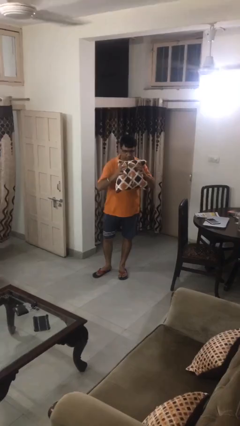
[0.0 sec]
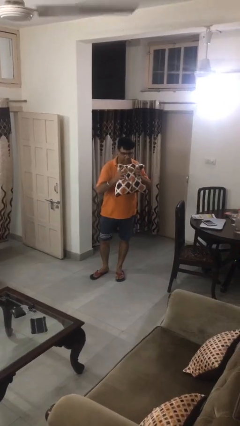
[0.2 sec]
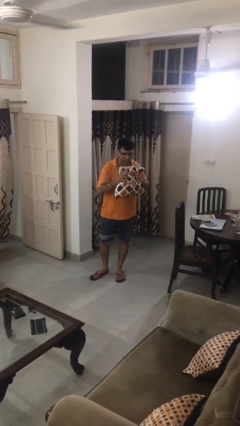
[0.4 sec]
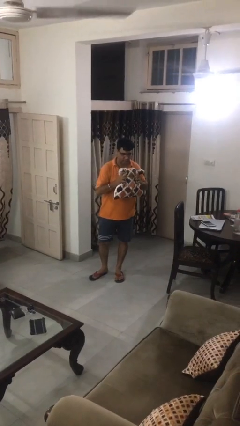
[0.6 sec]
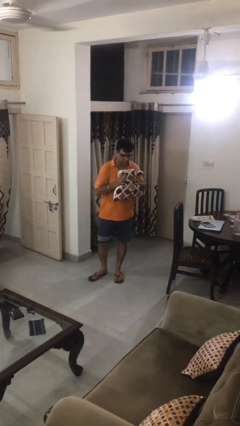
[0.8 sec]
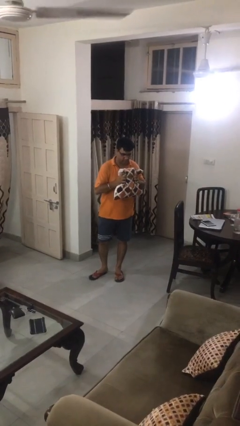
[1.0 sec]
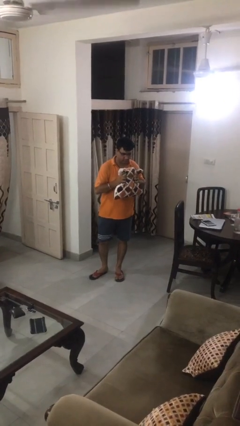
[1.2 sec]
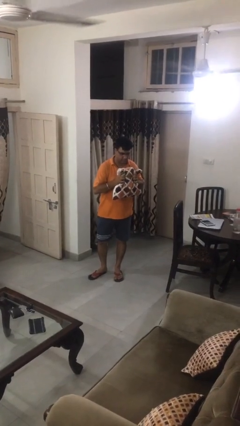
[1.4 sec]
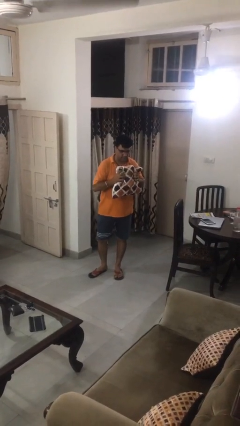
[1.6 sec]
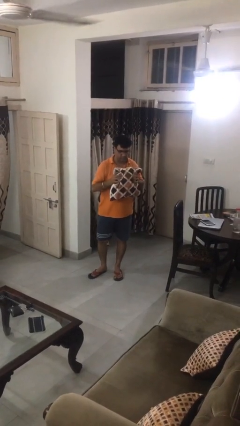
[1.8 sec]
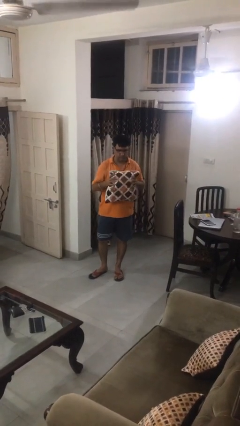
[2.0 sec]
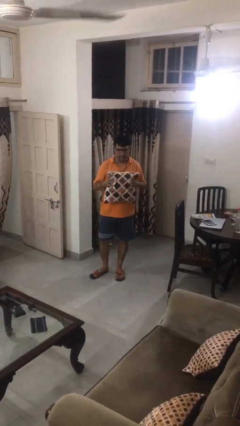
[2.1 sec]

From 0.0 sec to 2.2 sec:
person squeezes object

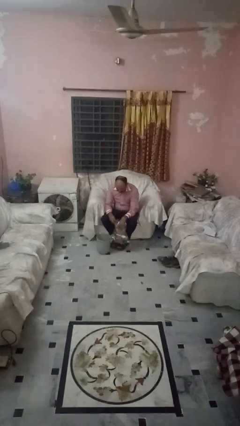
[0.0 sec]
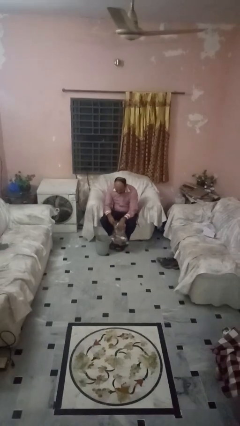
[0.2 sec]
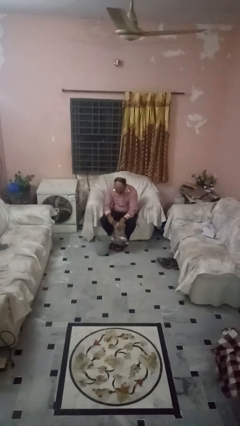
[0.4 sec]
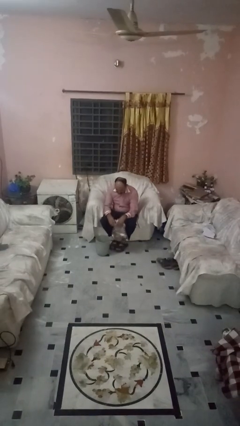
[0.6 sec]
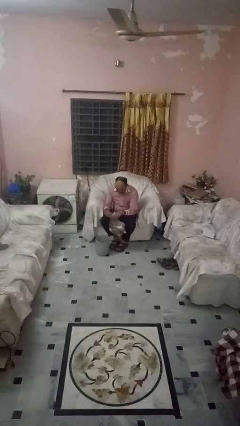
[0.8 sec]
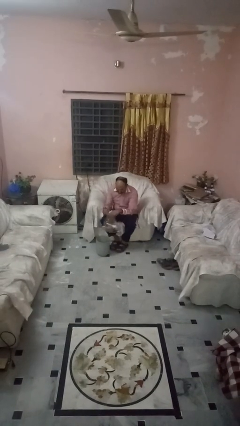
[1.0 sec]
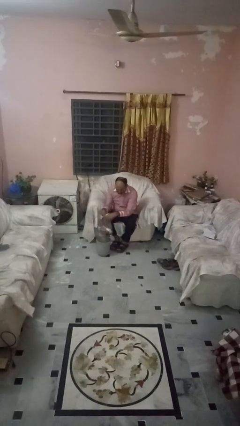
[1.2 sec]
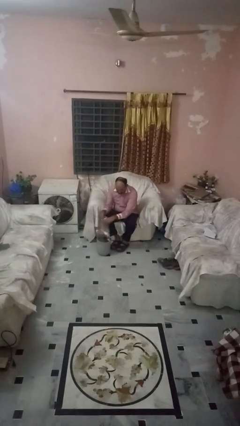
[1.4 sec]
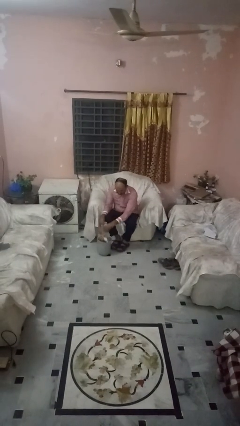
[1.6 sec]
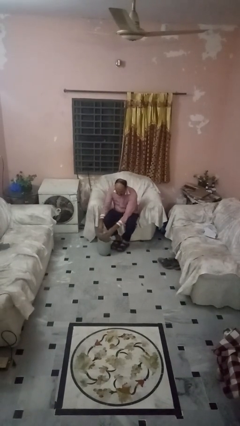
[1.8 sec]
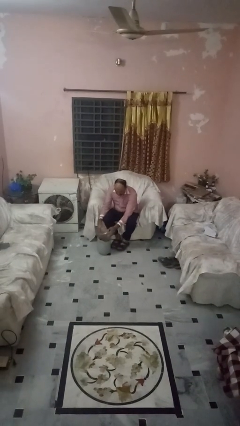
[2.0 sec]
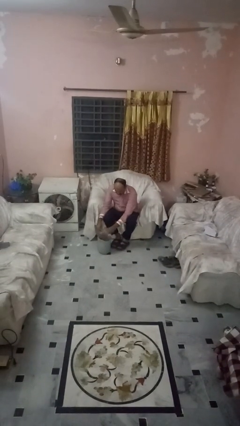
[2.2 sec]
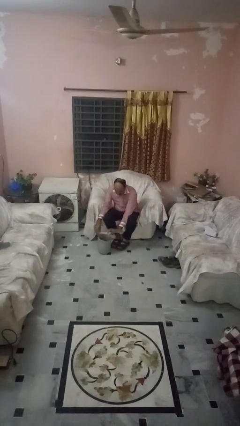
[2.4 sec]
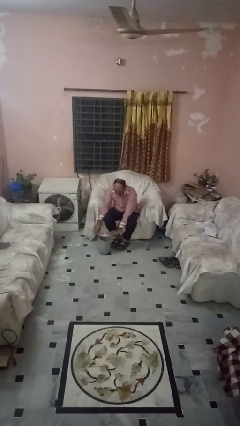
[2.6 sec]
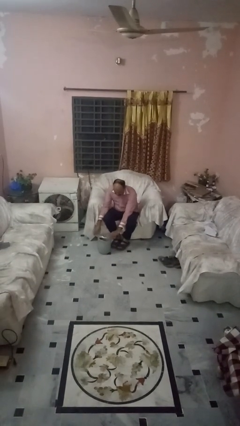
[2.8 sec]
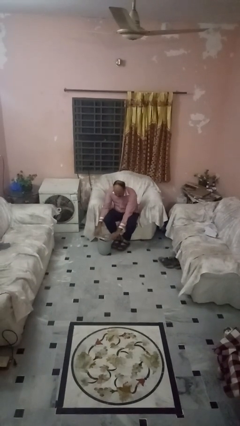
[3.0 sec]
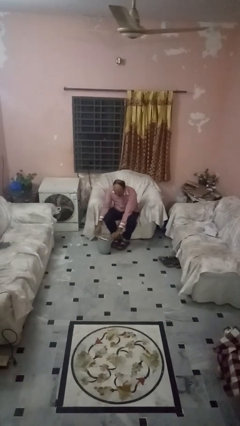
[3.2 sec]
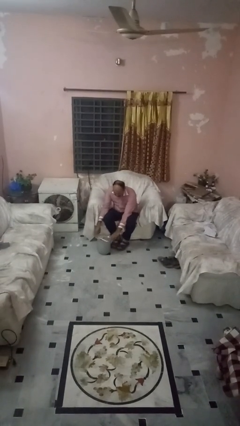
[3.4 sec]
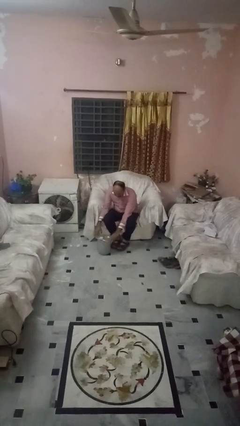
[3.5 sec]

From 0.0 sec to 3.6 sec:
person inserts trashbag into trashcan

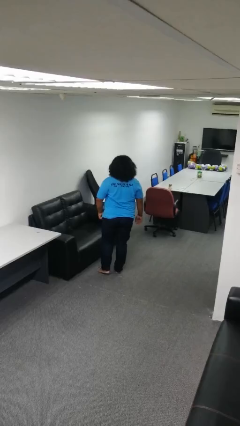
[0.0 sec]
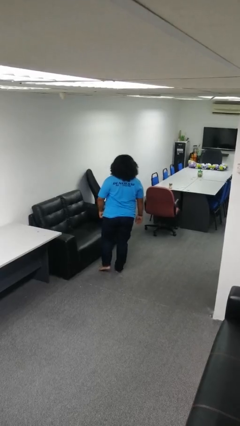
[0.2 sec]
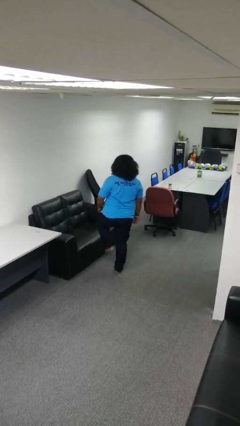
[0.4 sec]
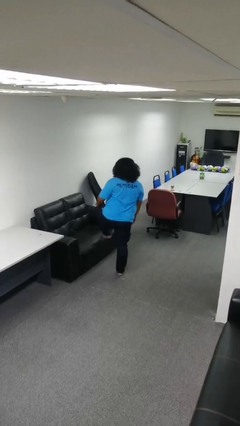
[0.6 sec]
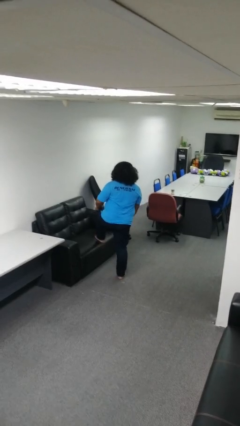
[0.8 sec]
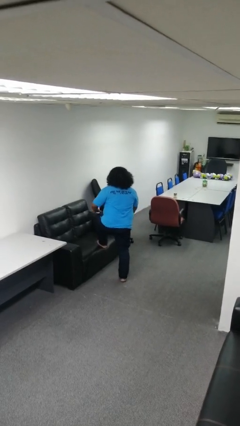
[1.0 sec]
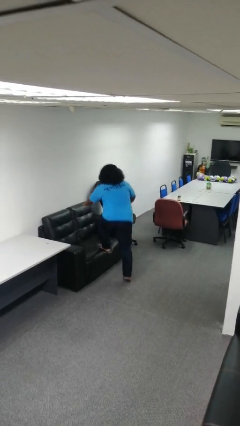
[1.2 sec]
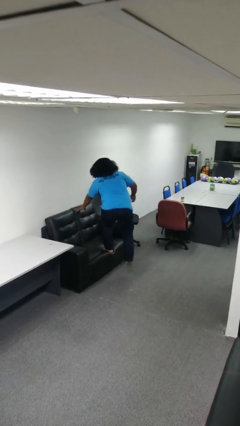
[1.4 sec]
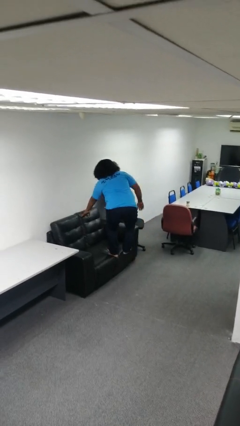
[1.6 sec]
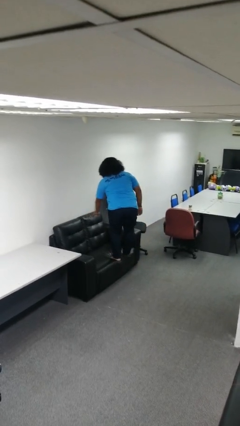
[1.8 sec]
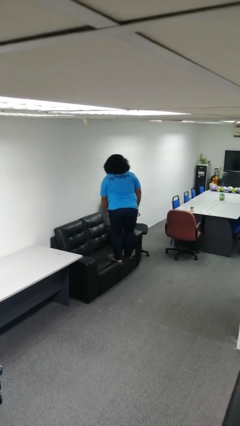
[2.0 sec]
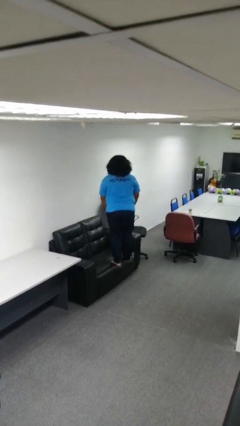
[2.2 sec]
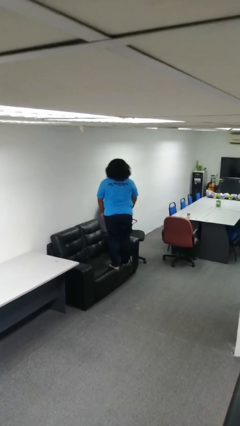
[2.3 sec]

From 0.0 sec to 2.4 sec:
person climbs on couch

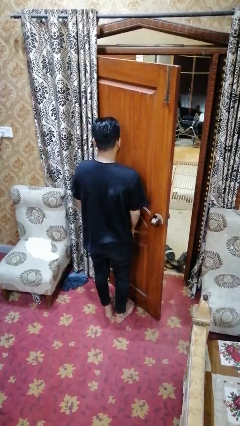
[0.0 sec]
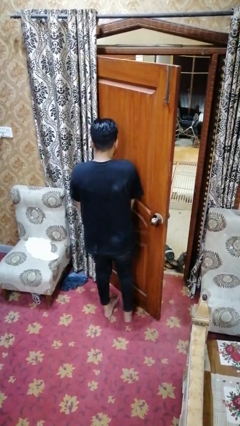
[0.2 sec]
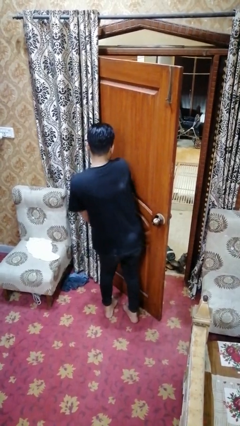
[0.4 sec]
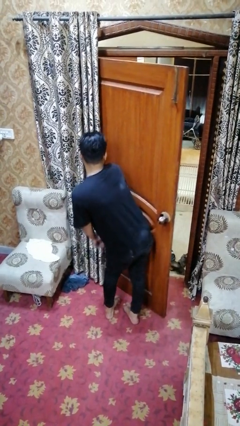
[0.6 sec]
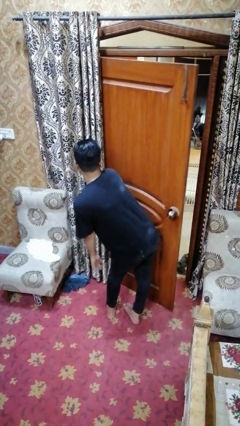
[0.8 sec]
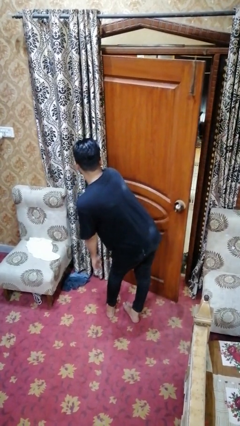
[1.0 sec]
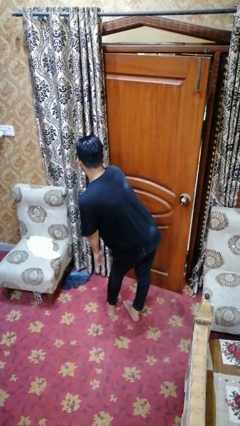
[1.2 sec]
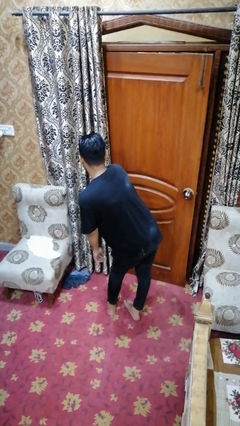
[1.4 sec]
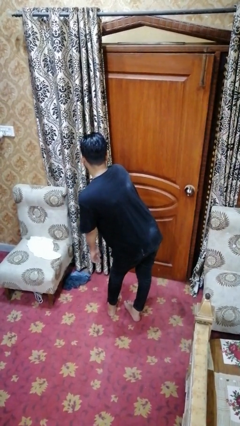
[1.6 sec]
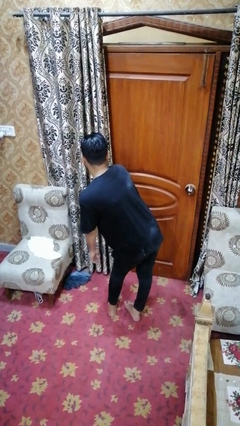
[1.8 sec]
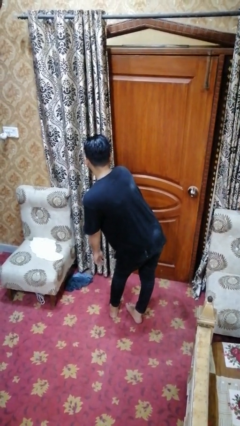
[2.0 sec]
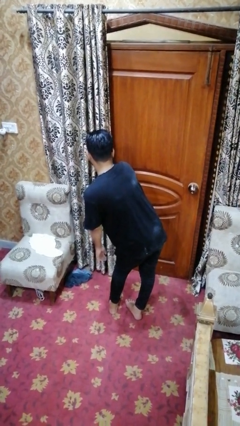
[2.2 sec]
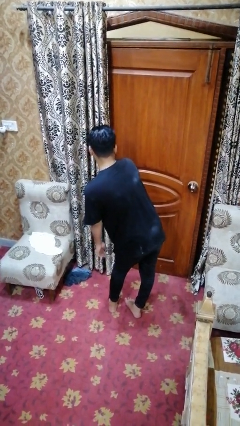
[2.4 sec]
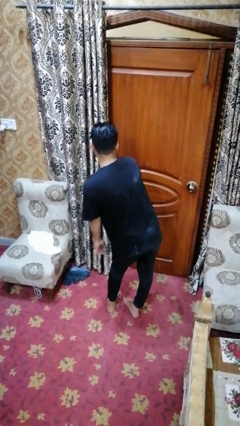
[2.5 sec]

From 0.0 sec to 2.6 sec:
person closes door with hip

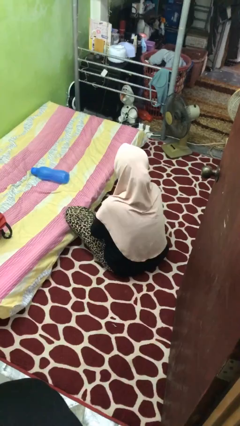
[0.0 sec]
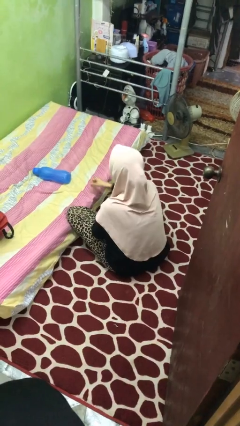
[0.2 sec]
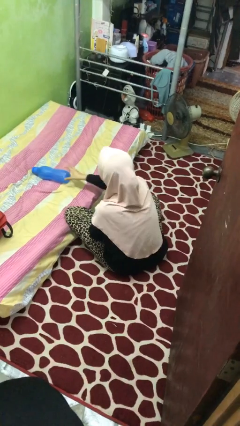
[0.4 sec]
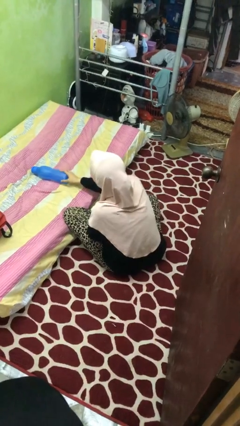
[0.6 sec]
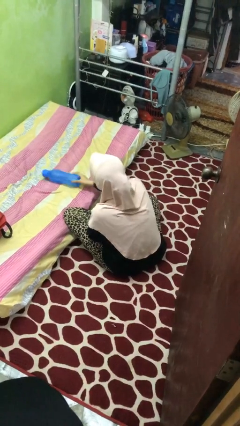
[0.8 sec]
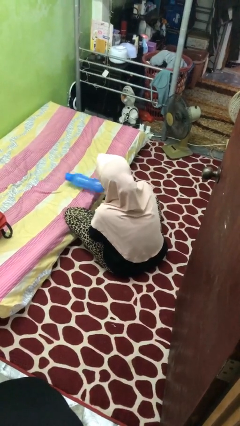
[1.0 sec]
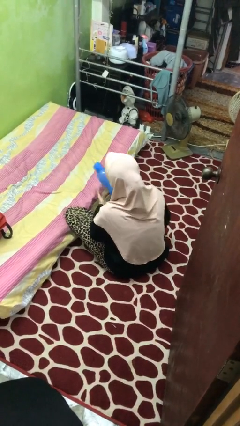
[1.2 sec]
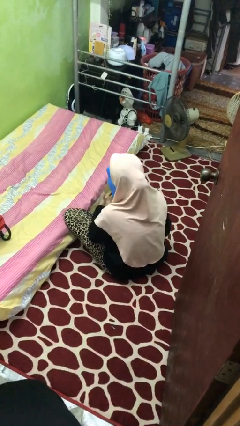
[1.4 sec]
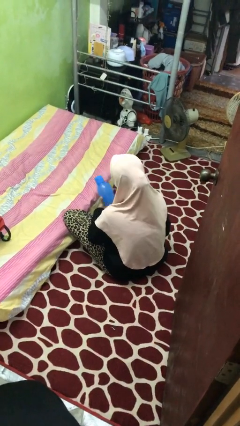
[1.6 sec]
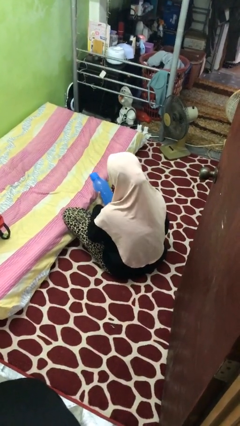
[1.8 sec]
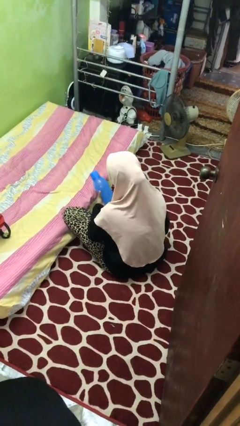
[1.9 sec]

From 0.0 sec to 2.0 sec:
person picks up object from bed

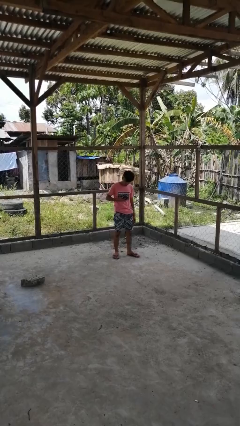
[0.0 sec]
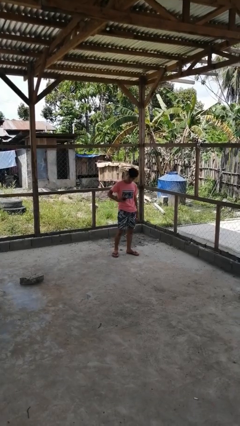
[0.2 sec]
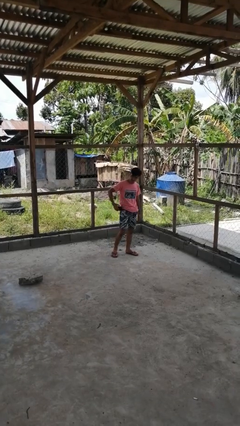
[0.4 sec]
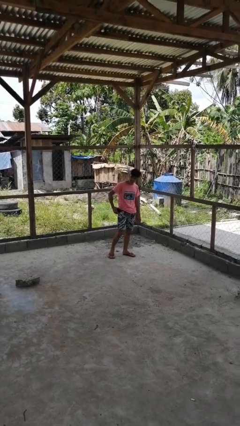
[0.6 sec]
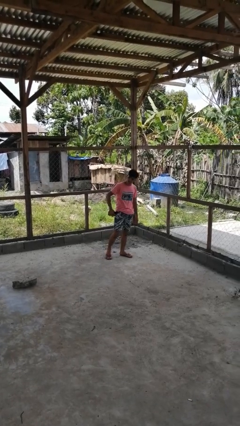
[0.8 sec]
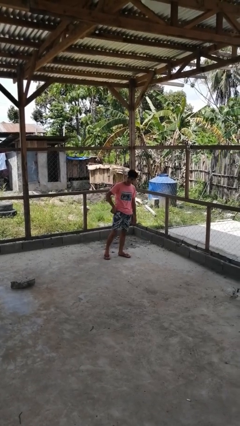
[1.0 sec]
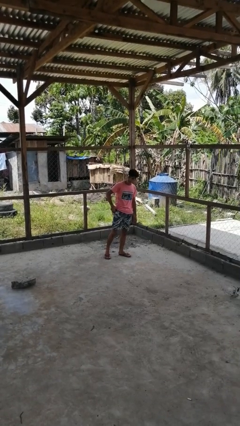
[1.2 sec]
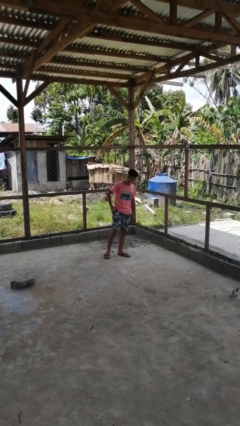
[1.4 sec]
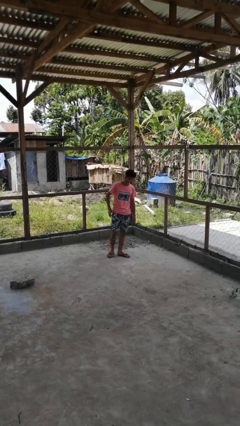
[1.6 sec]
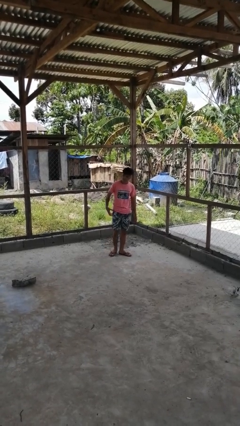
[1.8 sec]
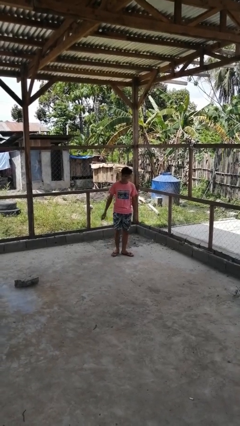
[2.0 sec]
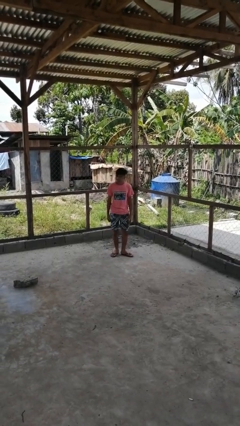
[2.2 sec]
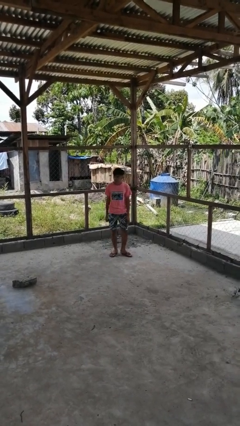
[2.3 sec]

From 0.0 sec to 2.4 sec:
person puts phone into pocket

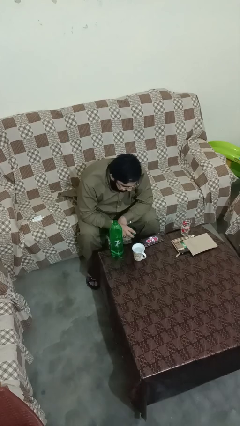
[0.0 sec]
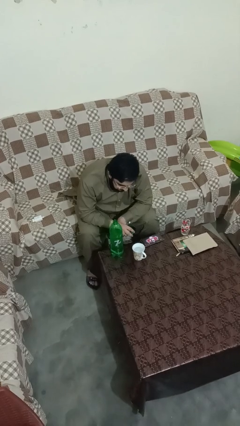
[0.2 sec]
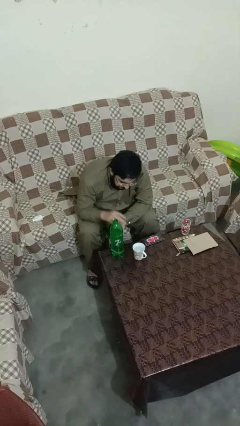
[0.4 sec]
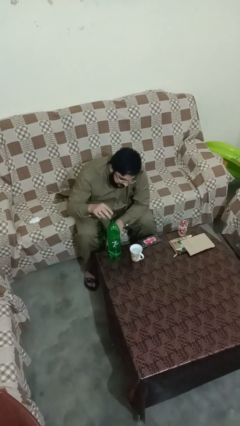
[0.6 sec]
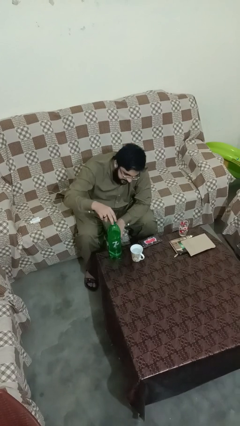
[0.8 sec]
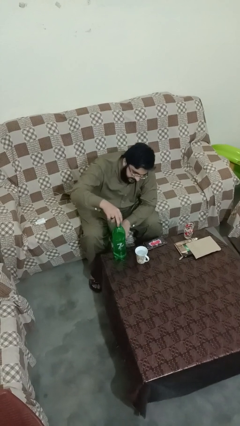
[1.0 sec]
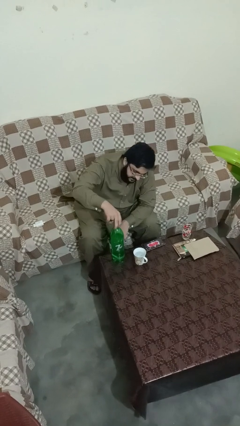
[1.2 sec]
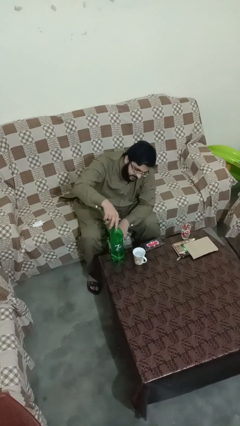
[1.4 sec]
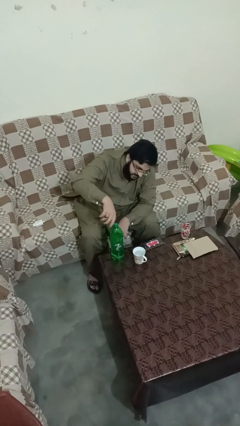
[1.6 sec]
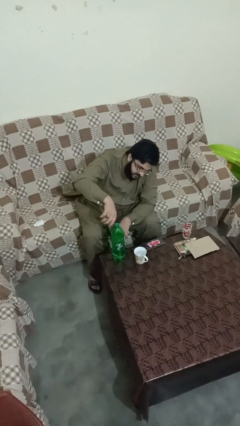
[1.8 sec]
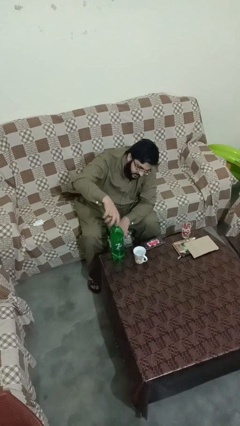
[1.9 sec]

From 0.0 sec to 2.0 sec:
person screws lid to bottle
